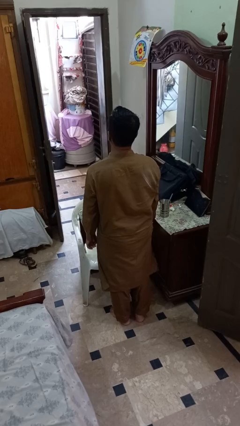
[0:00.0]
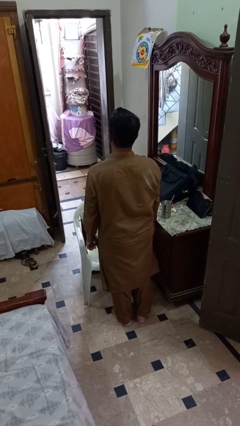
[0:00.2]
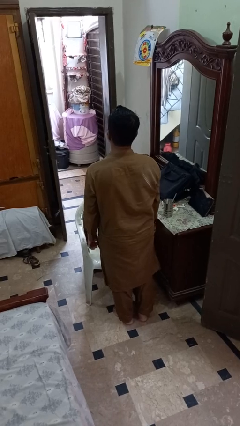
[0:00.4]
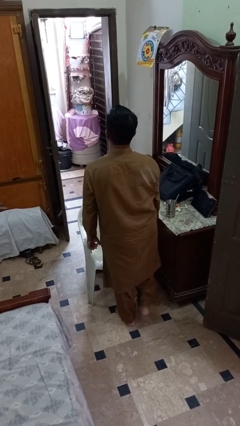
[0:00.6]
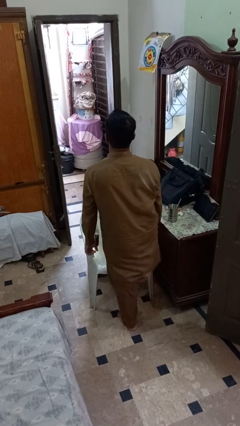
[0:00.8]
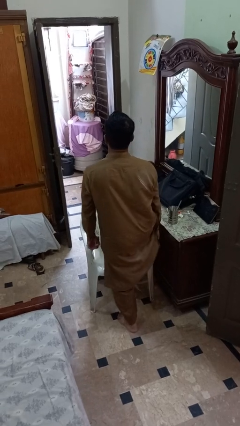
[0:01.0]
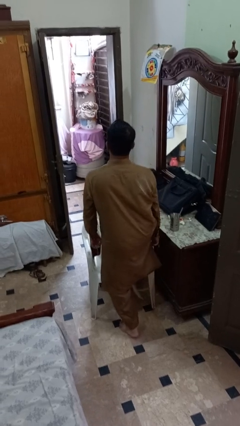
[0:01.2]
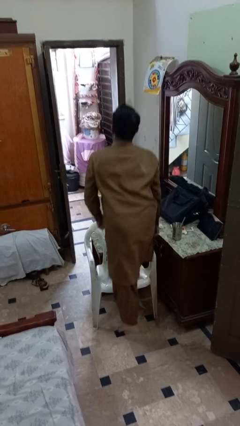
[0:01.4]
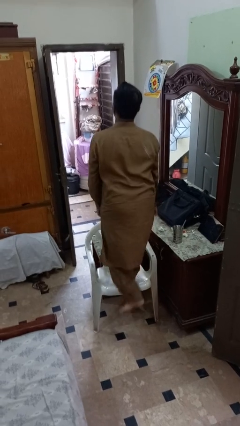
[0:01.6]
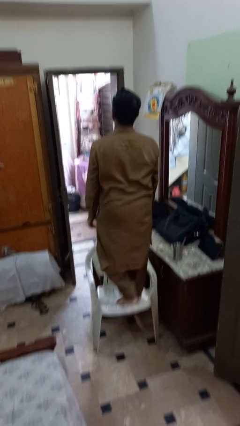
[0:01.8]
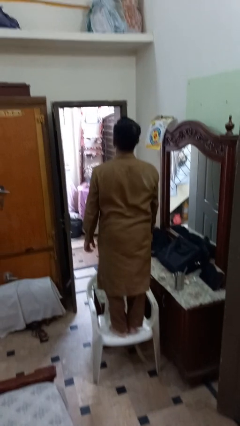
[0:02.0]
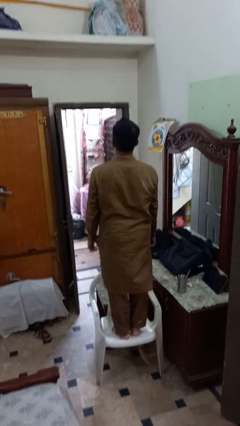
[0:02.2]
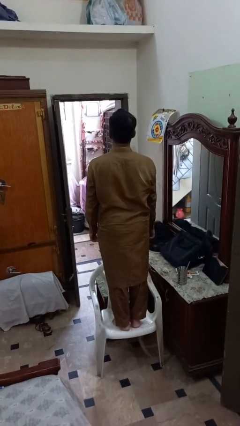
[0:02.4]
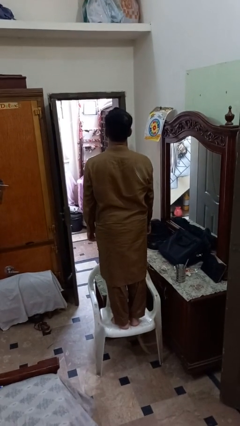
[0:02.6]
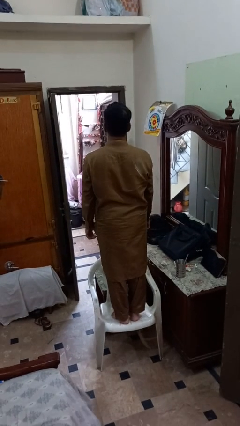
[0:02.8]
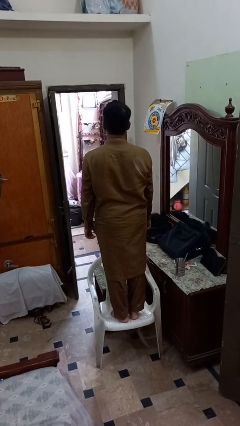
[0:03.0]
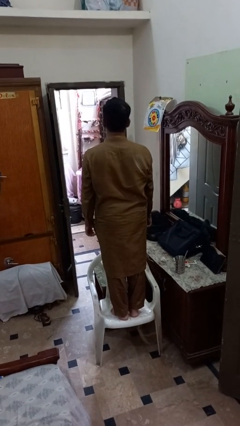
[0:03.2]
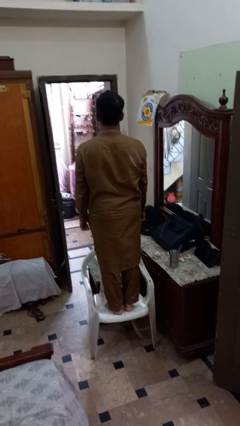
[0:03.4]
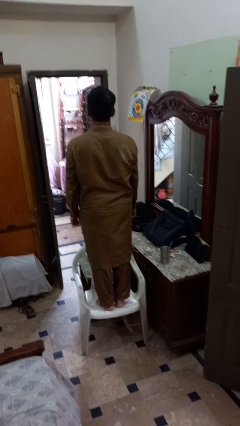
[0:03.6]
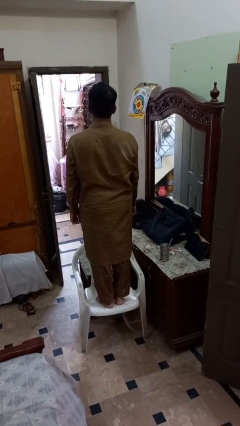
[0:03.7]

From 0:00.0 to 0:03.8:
person climbs on chair

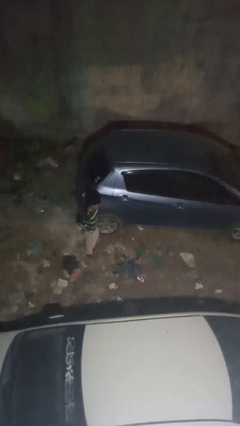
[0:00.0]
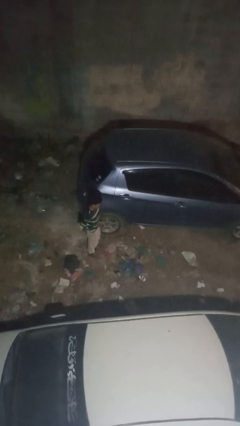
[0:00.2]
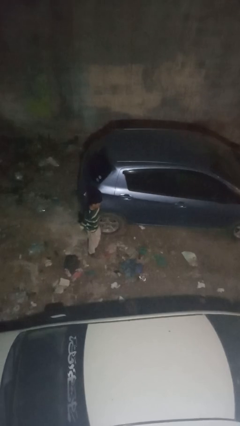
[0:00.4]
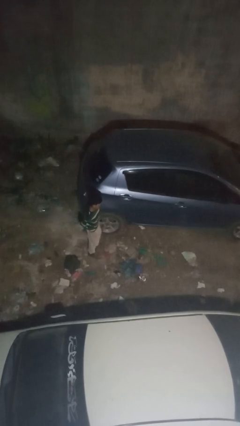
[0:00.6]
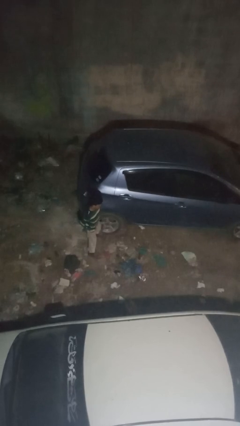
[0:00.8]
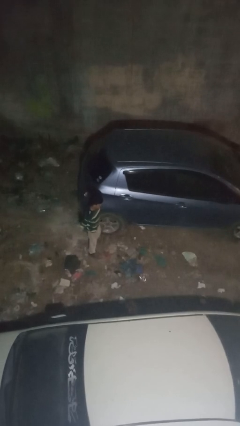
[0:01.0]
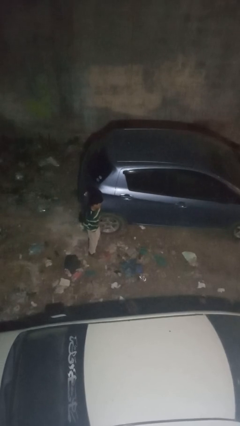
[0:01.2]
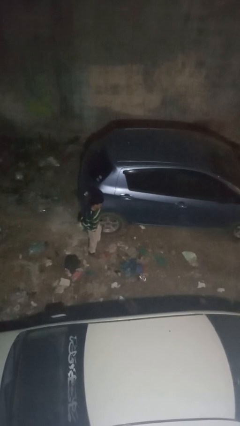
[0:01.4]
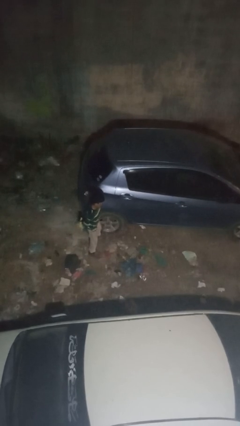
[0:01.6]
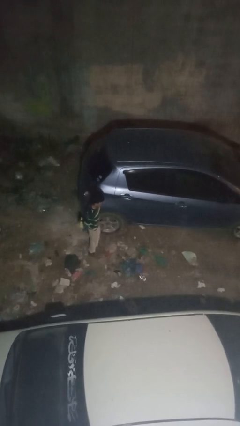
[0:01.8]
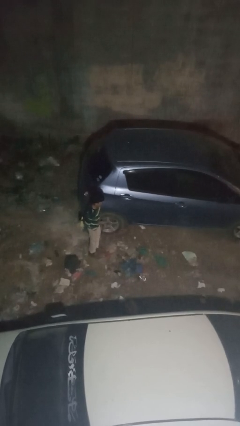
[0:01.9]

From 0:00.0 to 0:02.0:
person kicks car tires

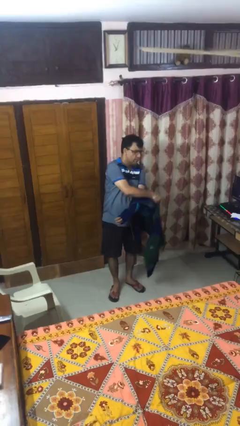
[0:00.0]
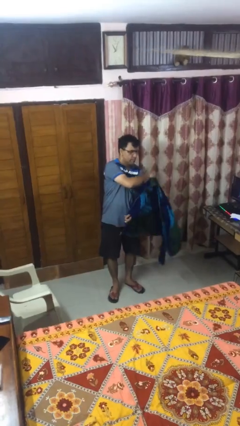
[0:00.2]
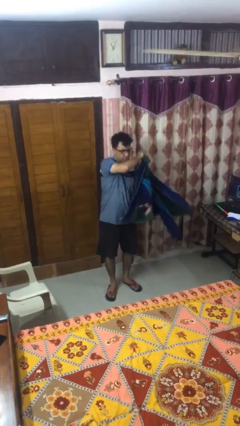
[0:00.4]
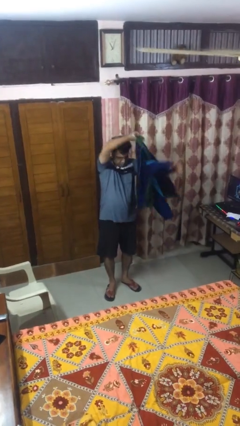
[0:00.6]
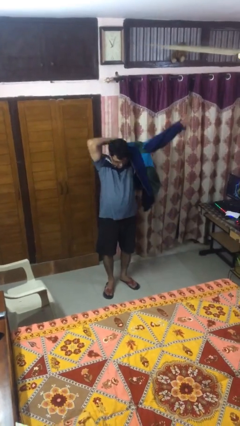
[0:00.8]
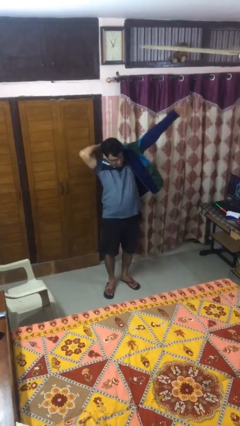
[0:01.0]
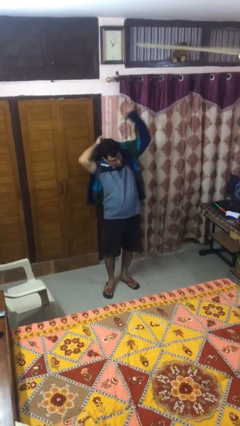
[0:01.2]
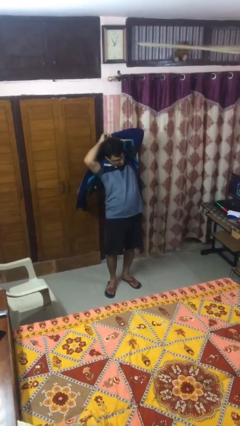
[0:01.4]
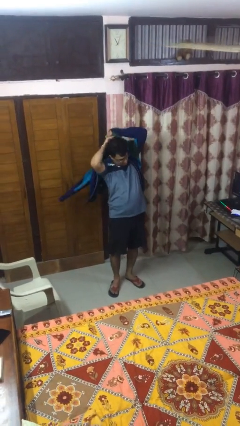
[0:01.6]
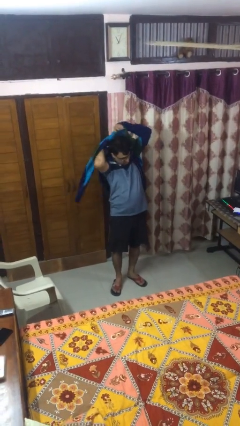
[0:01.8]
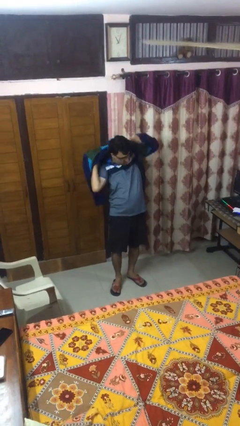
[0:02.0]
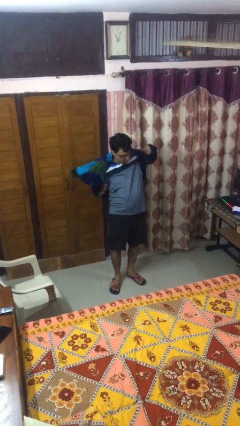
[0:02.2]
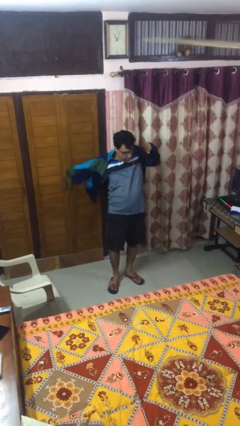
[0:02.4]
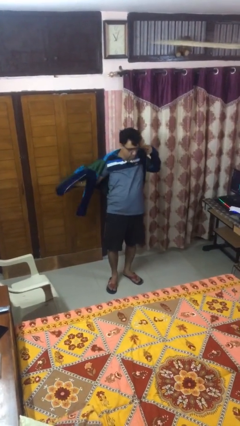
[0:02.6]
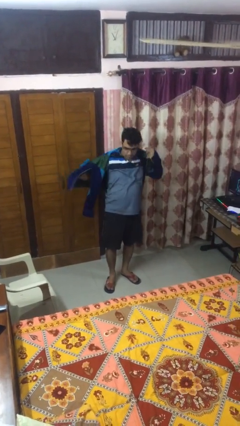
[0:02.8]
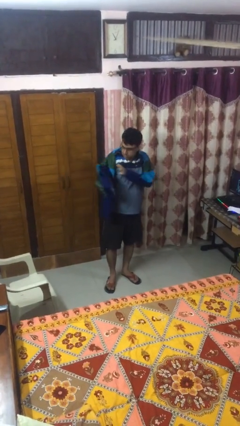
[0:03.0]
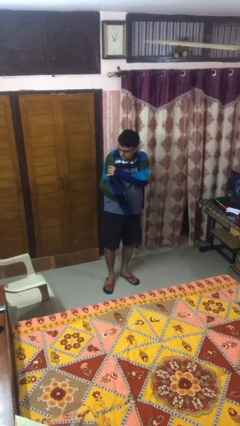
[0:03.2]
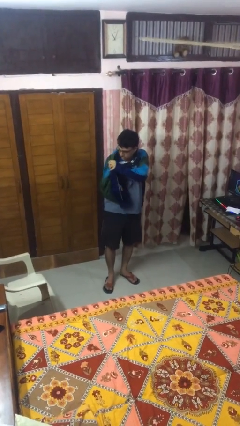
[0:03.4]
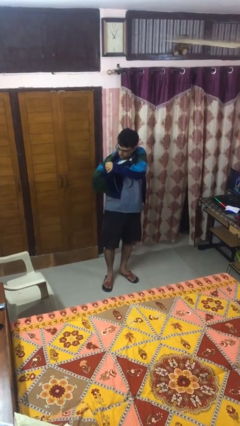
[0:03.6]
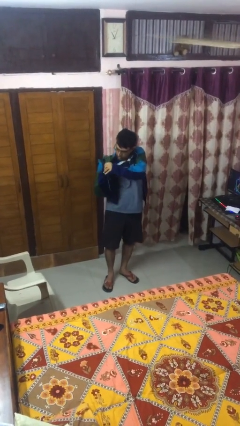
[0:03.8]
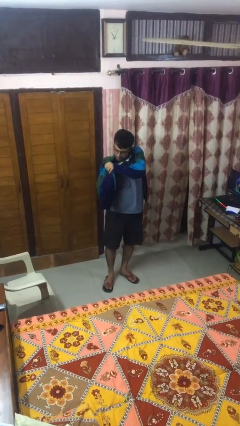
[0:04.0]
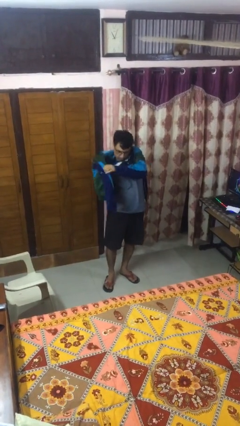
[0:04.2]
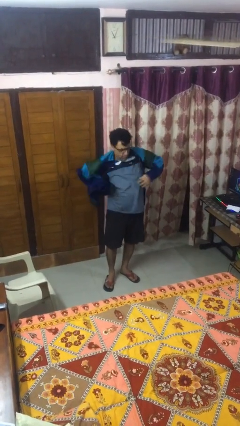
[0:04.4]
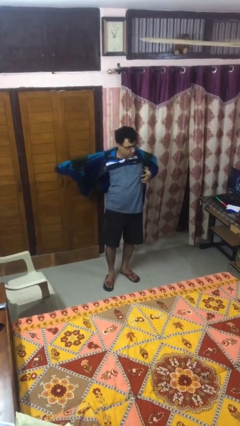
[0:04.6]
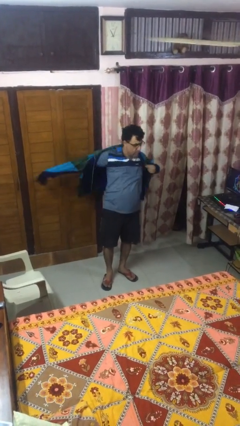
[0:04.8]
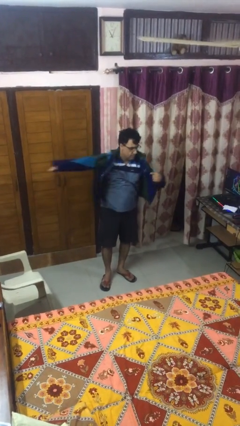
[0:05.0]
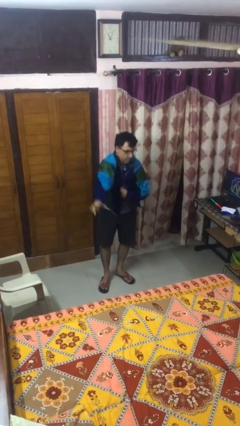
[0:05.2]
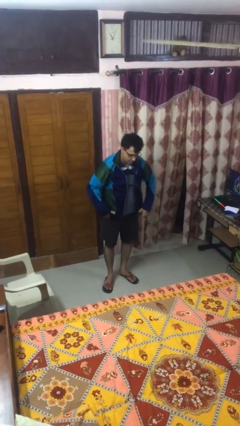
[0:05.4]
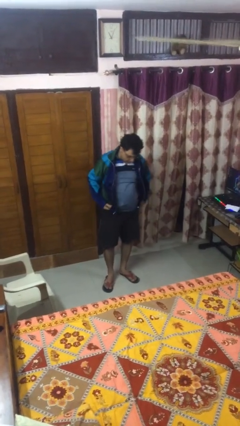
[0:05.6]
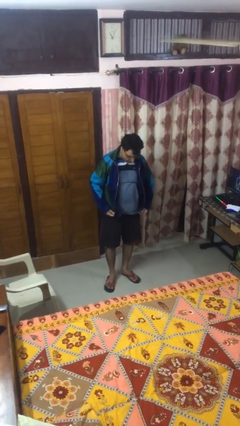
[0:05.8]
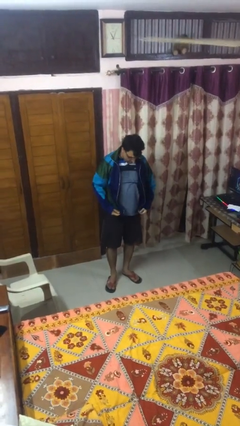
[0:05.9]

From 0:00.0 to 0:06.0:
person puts on jacket

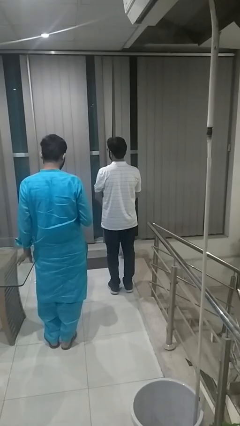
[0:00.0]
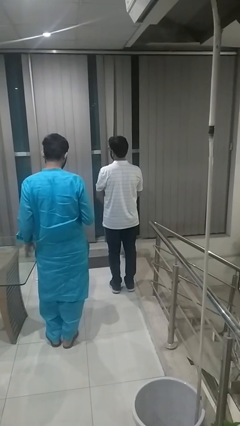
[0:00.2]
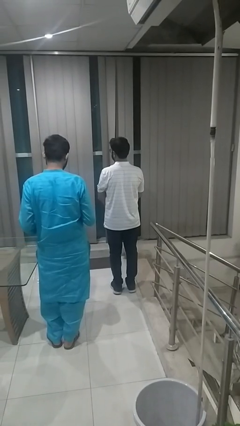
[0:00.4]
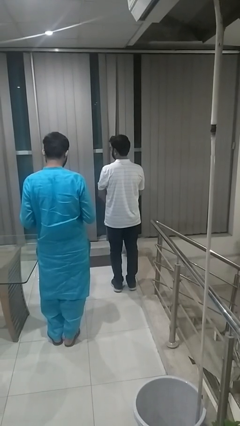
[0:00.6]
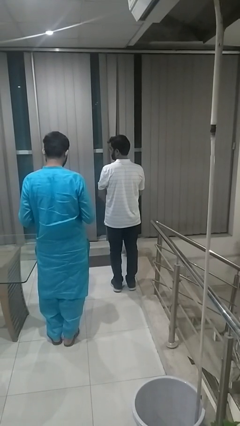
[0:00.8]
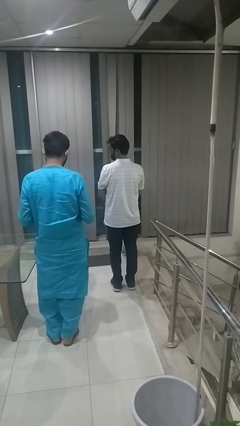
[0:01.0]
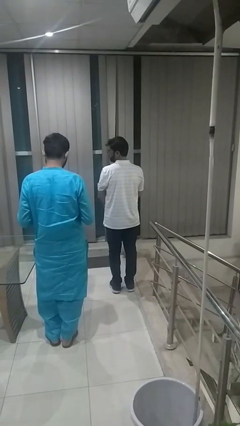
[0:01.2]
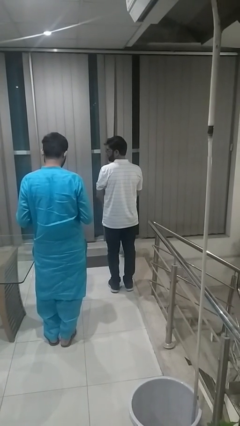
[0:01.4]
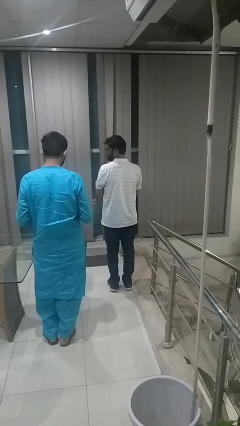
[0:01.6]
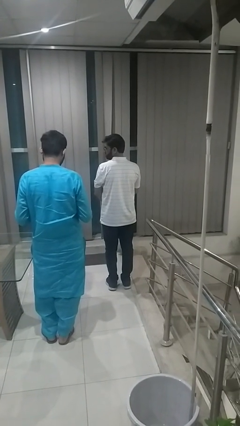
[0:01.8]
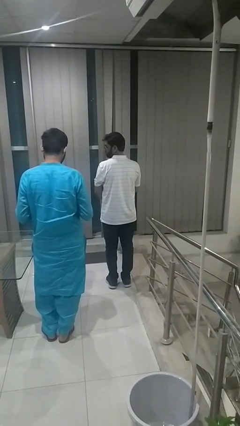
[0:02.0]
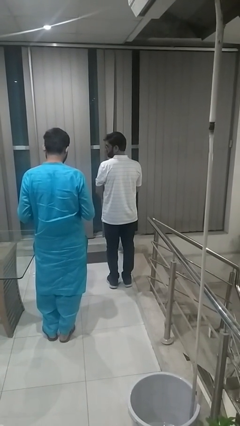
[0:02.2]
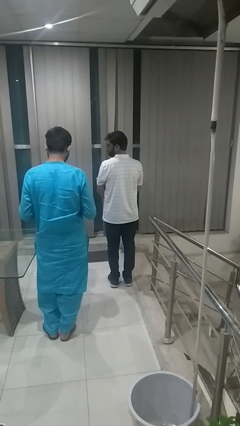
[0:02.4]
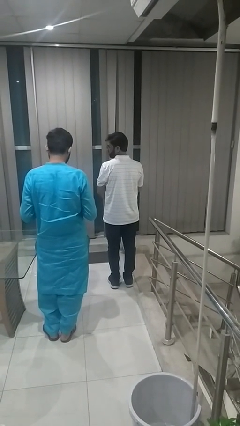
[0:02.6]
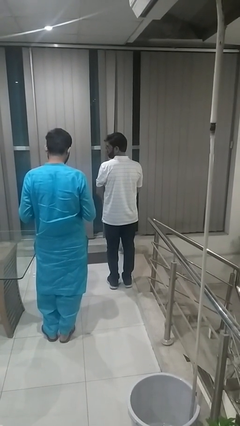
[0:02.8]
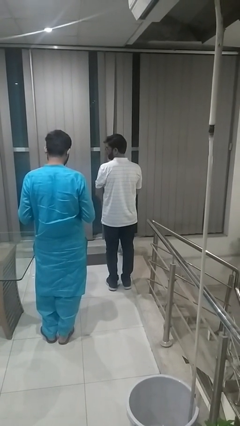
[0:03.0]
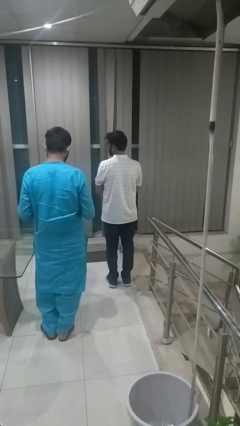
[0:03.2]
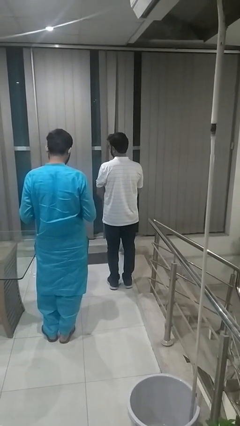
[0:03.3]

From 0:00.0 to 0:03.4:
person looks over shoulder

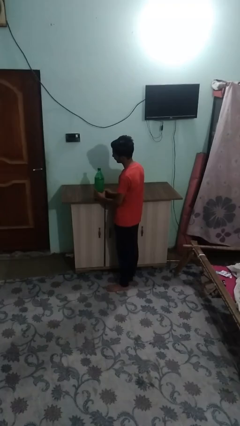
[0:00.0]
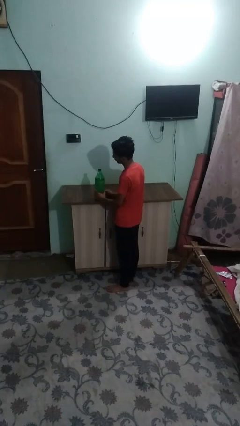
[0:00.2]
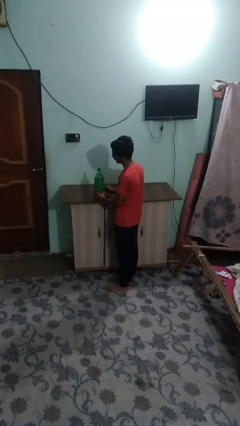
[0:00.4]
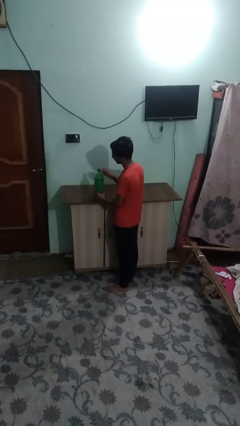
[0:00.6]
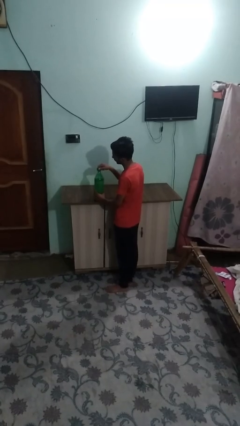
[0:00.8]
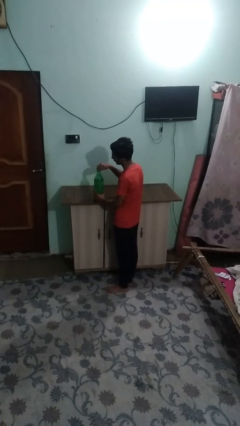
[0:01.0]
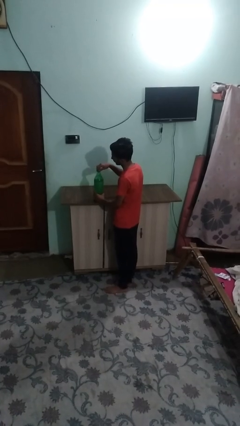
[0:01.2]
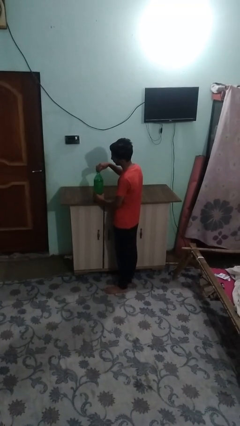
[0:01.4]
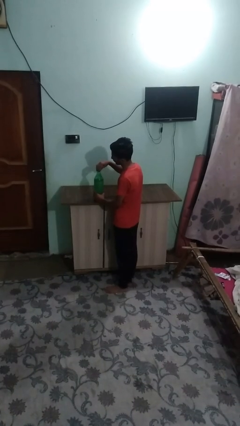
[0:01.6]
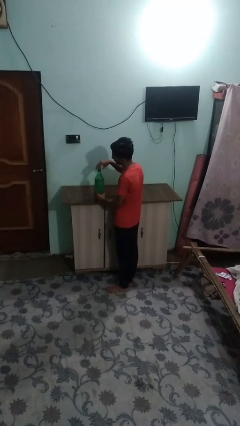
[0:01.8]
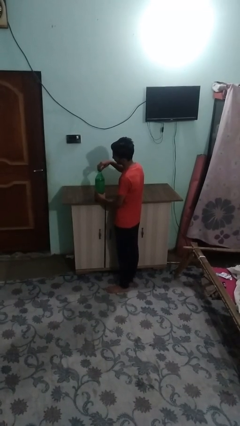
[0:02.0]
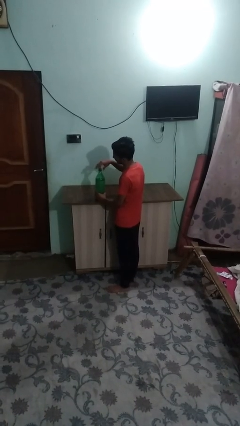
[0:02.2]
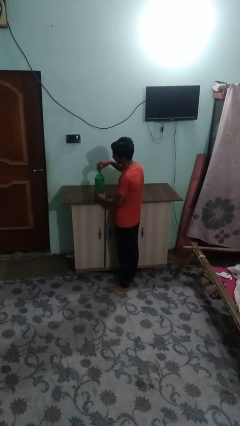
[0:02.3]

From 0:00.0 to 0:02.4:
person unscrews lid from bottle
